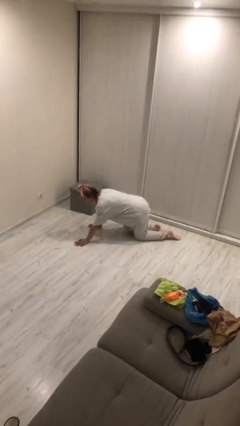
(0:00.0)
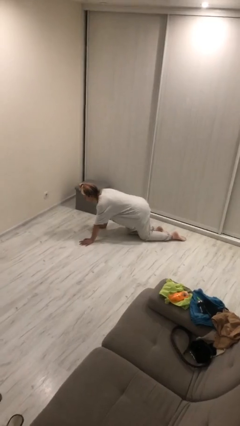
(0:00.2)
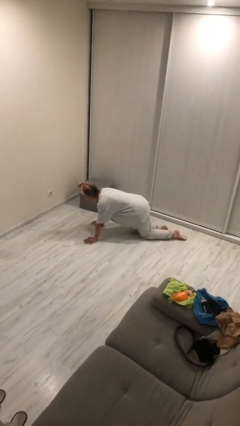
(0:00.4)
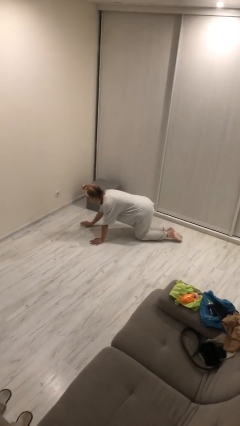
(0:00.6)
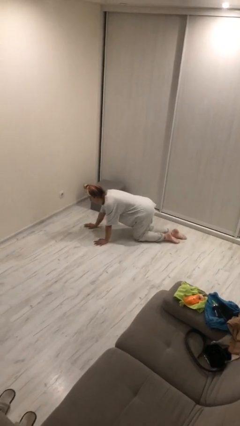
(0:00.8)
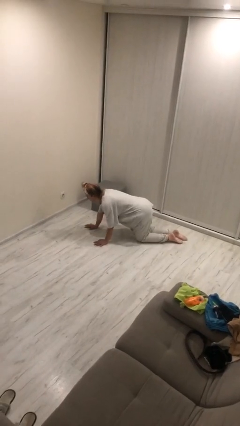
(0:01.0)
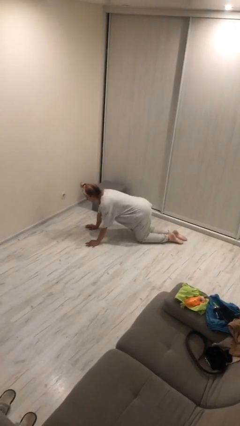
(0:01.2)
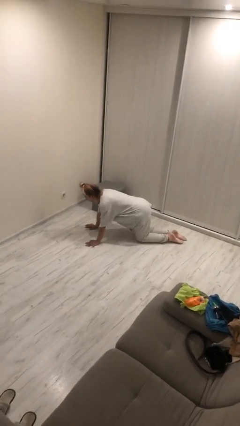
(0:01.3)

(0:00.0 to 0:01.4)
person crawls

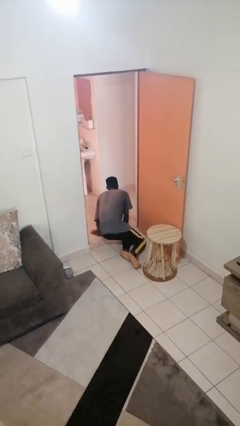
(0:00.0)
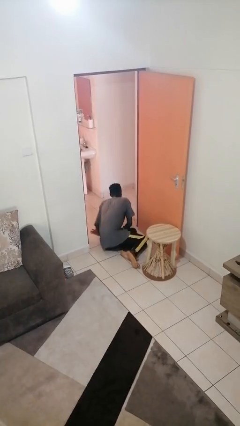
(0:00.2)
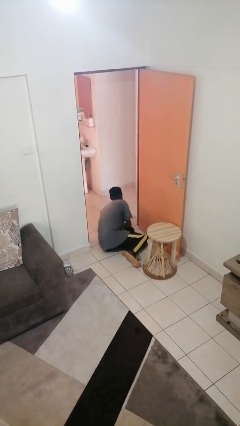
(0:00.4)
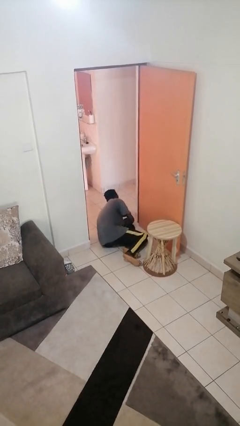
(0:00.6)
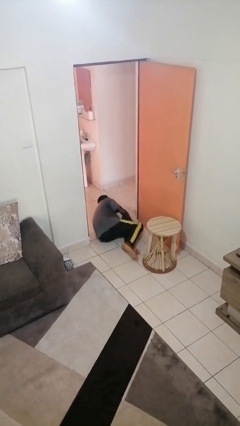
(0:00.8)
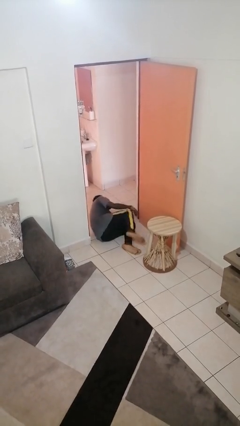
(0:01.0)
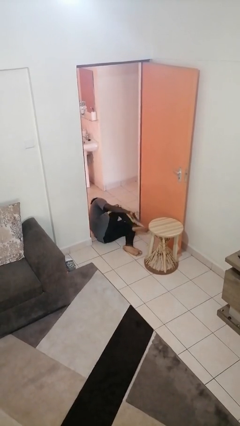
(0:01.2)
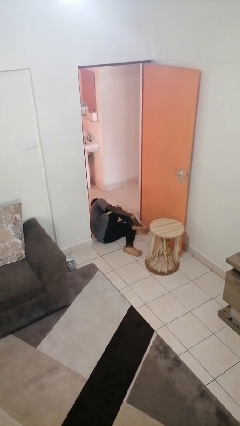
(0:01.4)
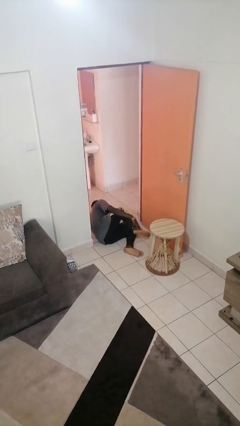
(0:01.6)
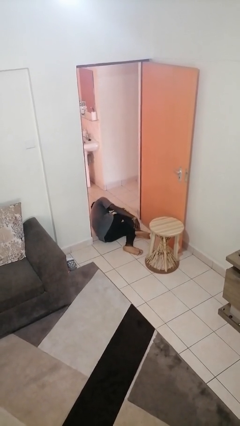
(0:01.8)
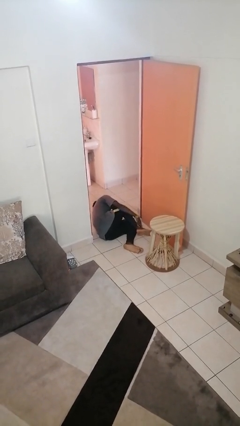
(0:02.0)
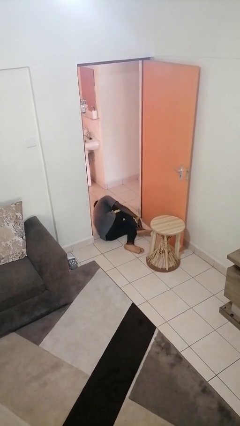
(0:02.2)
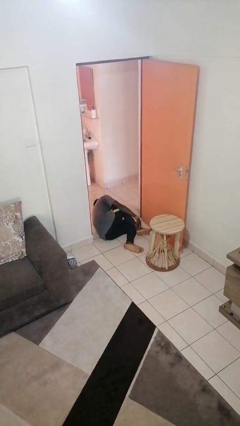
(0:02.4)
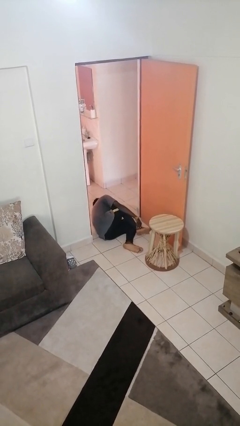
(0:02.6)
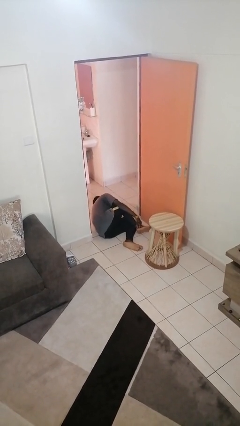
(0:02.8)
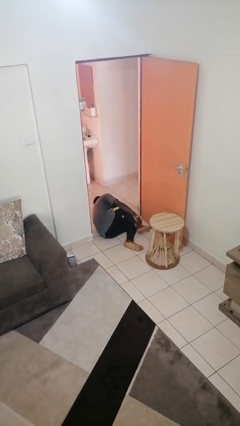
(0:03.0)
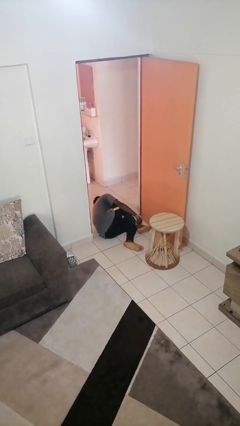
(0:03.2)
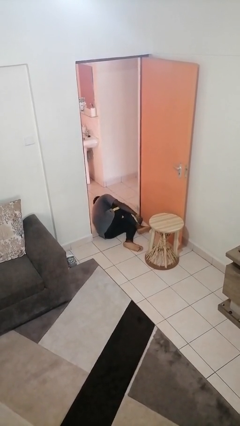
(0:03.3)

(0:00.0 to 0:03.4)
person lies down on floor

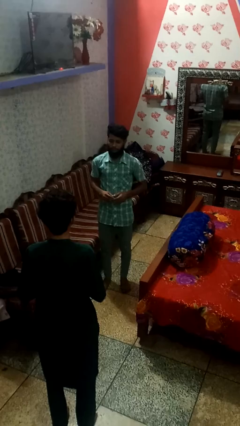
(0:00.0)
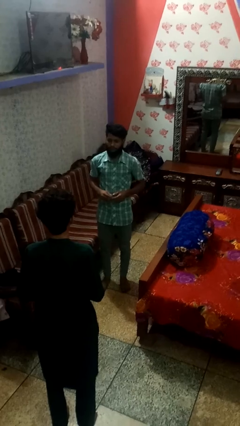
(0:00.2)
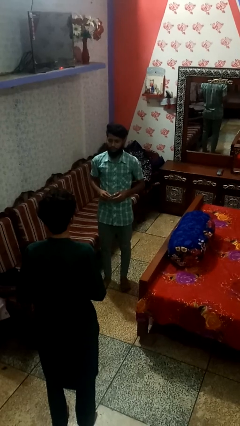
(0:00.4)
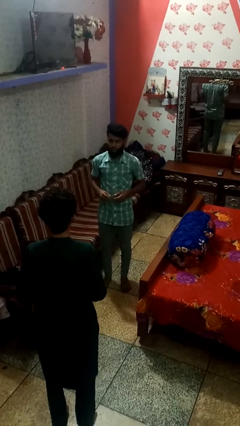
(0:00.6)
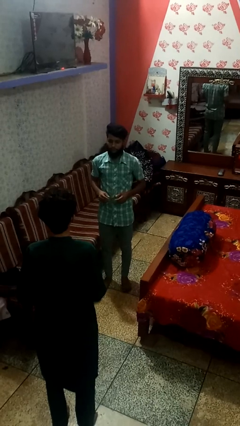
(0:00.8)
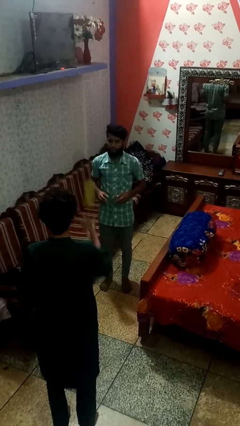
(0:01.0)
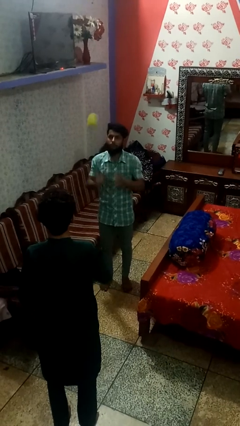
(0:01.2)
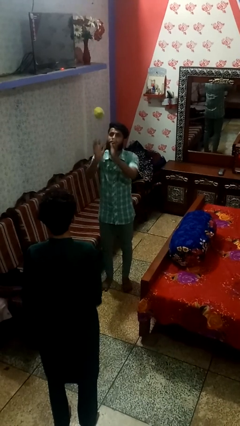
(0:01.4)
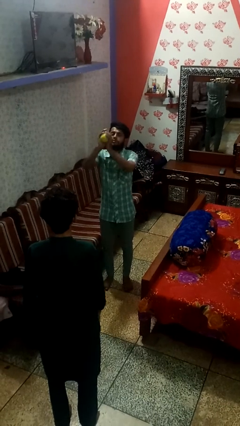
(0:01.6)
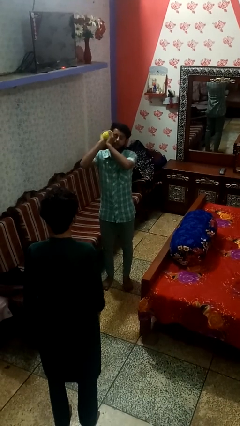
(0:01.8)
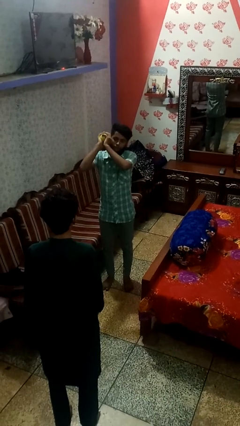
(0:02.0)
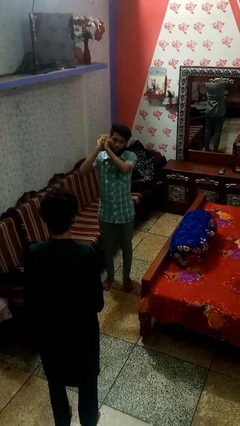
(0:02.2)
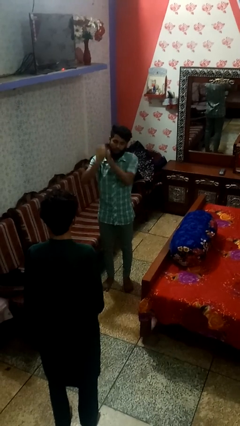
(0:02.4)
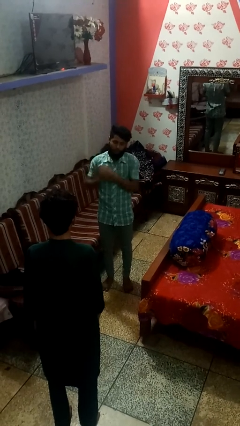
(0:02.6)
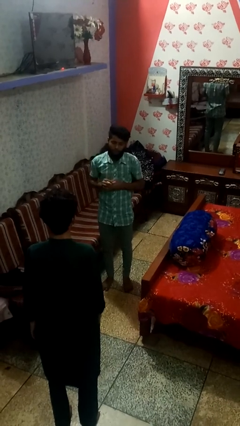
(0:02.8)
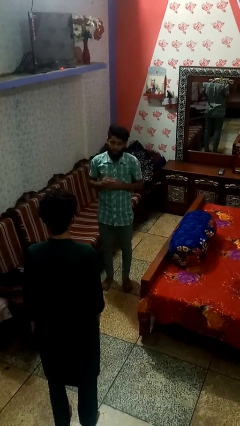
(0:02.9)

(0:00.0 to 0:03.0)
person catches object from person

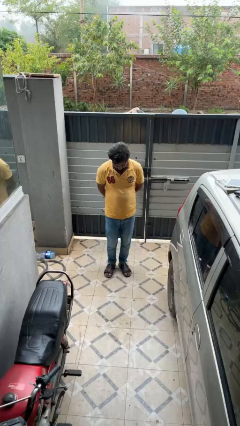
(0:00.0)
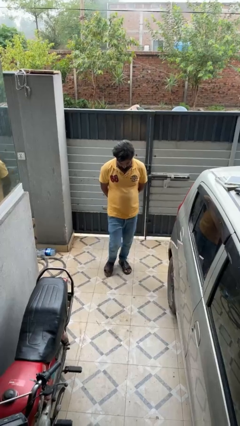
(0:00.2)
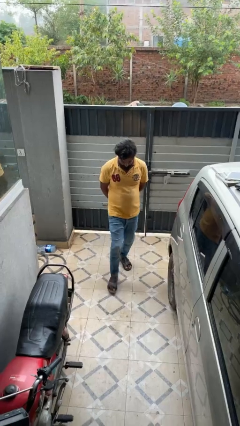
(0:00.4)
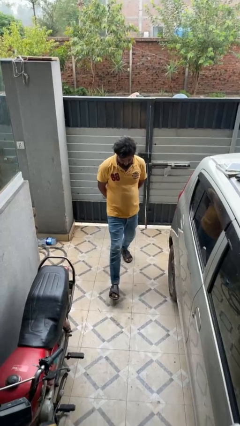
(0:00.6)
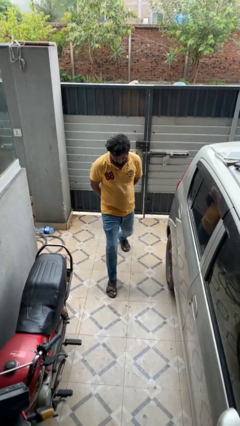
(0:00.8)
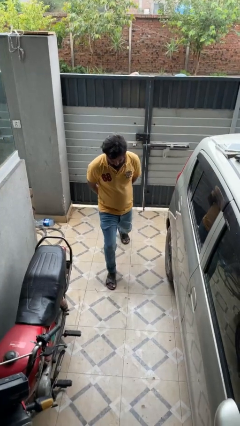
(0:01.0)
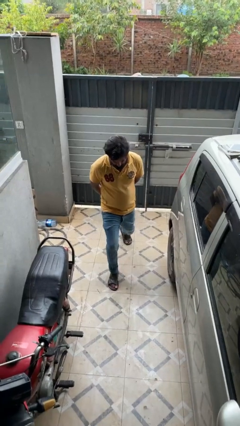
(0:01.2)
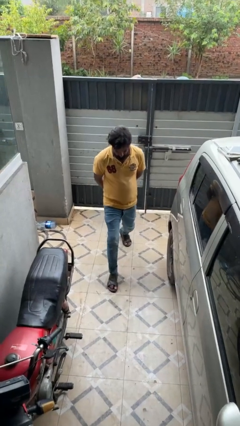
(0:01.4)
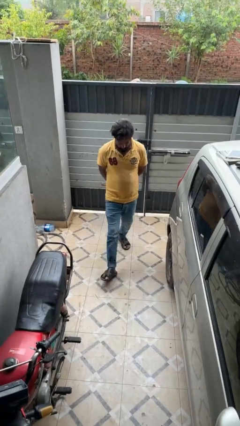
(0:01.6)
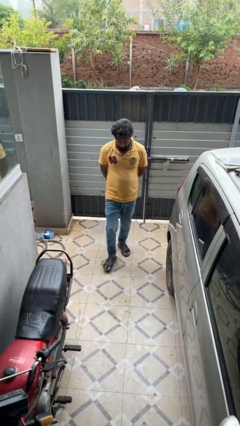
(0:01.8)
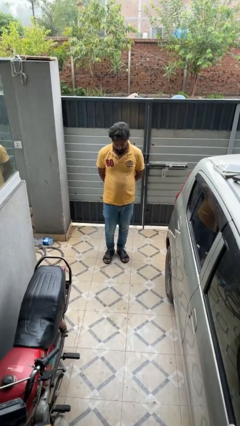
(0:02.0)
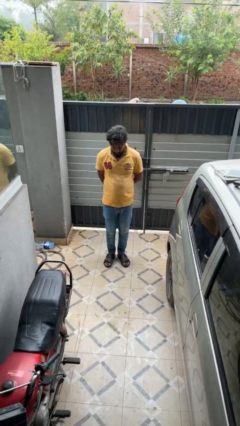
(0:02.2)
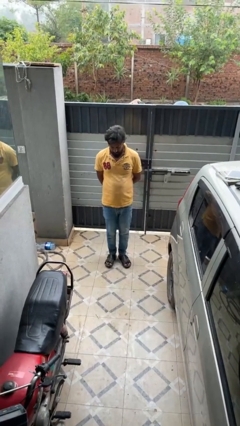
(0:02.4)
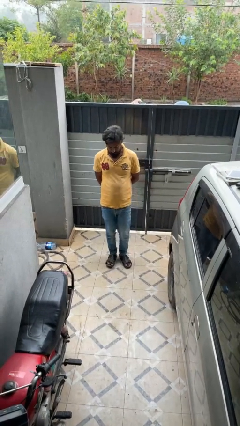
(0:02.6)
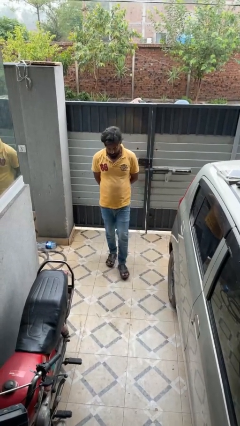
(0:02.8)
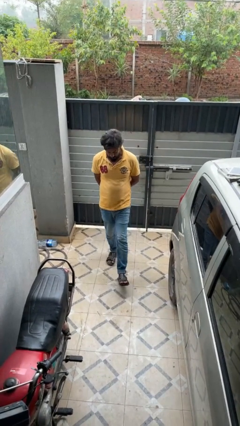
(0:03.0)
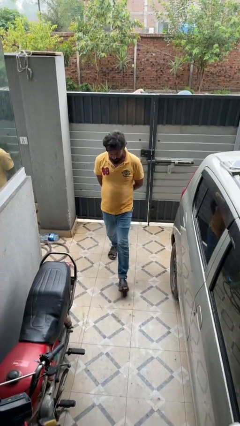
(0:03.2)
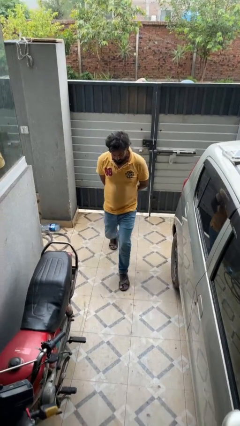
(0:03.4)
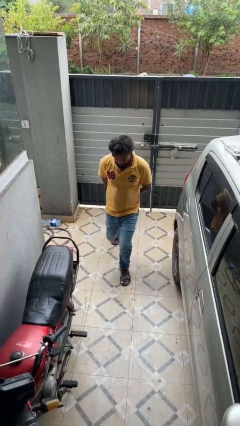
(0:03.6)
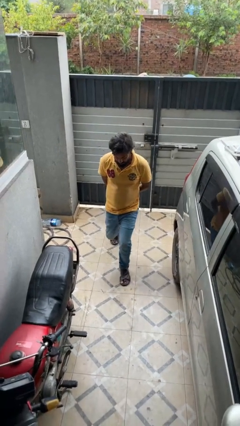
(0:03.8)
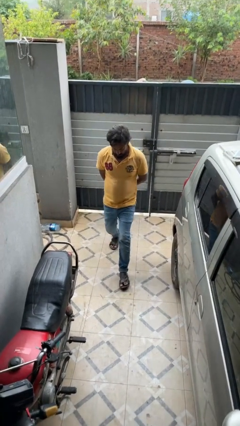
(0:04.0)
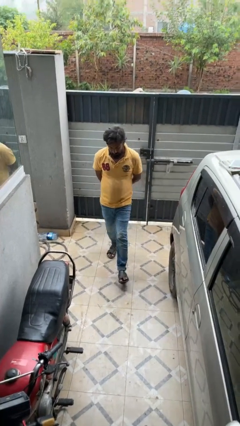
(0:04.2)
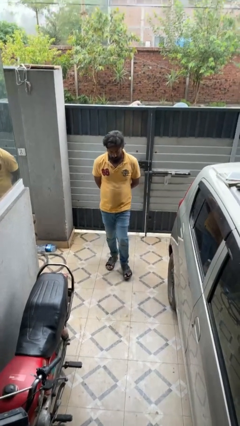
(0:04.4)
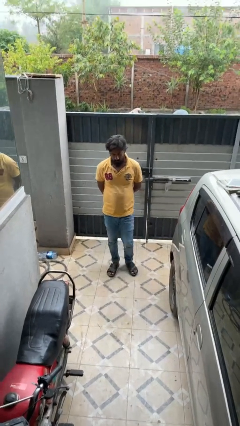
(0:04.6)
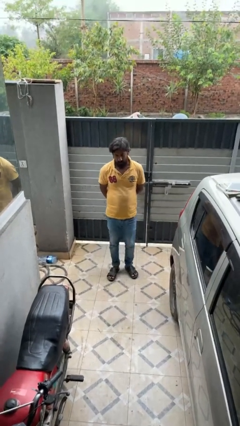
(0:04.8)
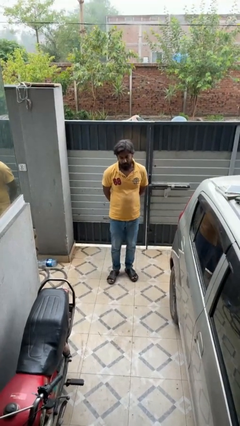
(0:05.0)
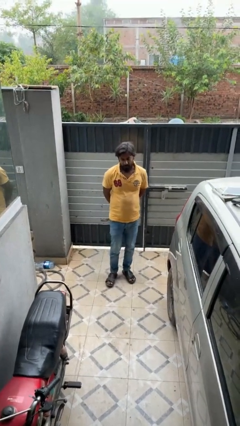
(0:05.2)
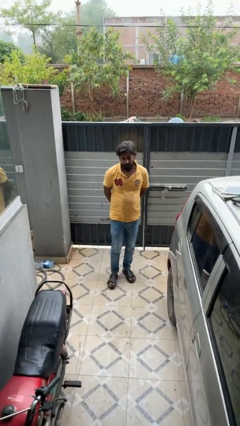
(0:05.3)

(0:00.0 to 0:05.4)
person exercises with lunges

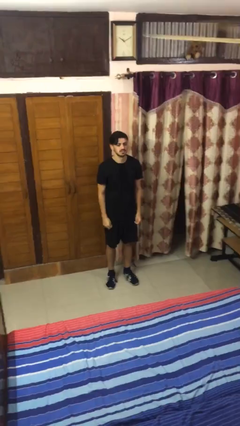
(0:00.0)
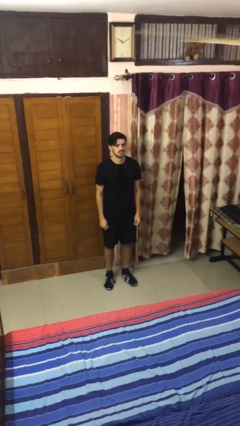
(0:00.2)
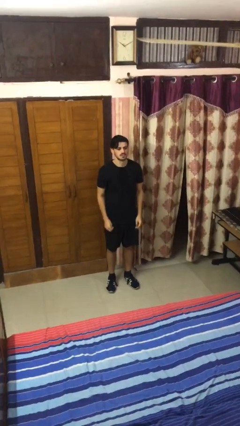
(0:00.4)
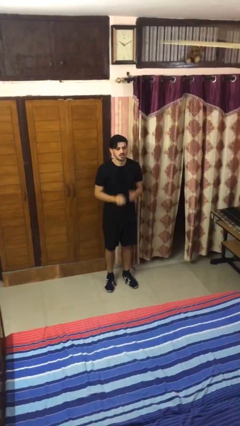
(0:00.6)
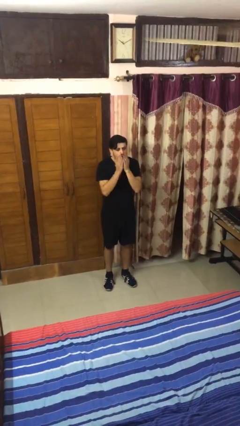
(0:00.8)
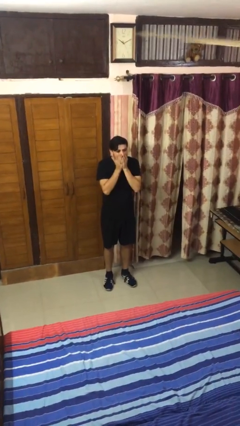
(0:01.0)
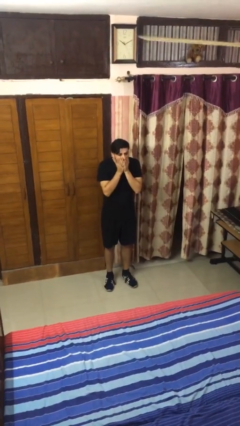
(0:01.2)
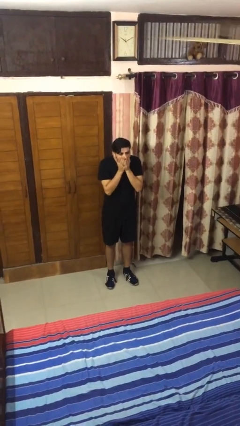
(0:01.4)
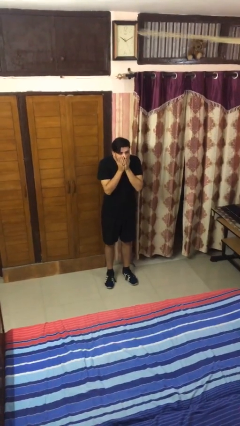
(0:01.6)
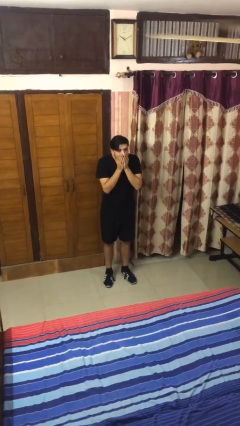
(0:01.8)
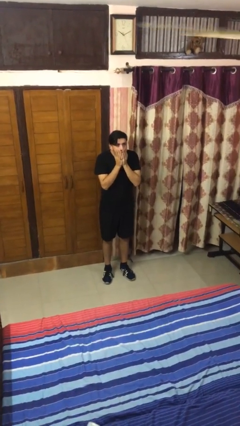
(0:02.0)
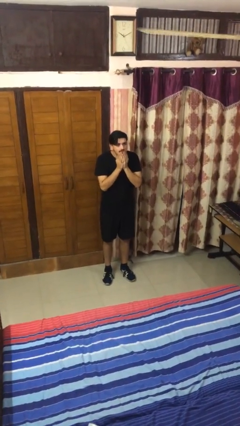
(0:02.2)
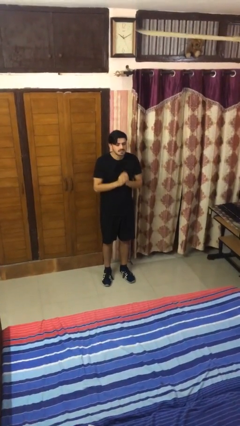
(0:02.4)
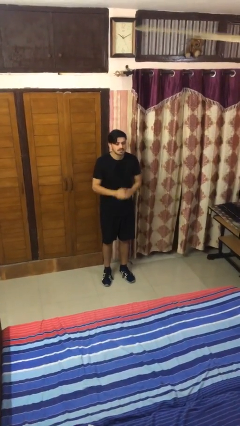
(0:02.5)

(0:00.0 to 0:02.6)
person covers face with hands

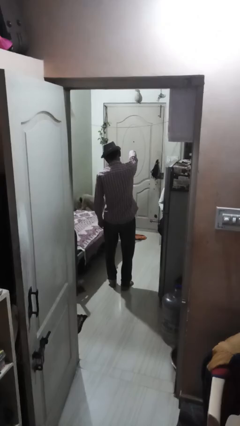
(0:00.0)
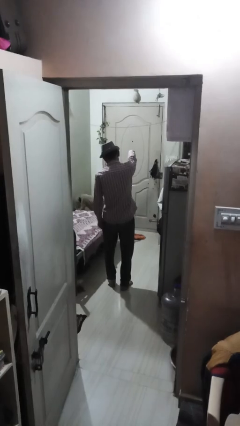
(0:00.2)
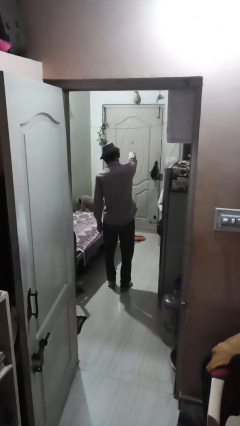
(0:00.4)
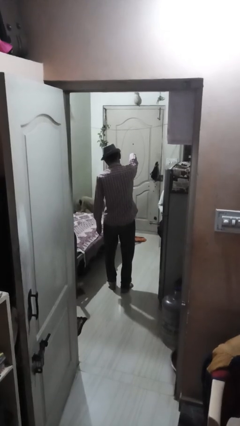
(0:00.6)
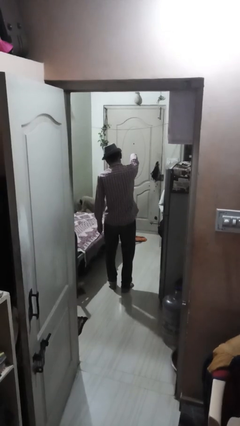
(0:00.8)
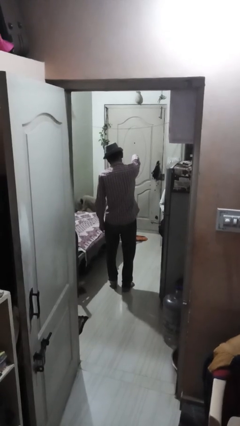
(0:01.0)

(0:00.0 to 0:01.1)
person points at person

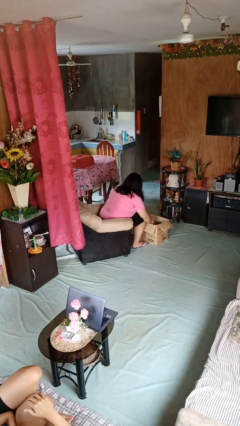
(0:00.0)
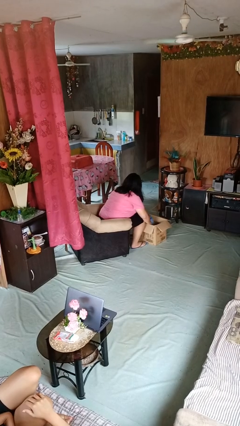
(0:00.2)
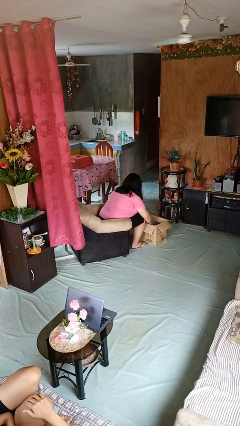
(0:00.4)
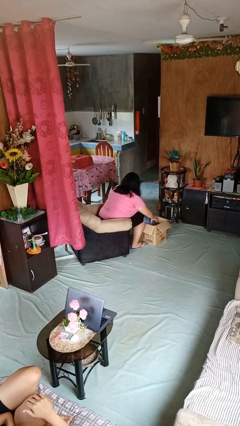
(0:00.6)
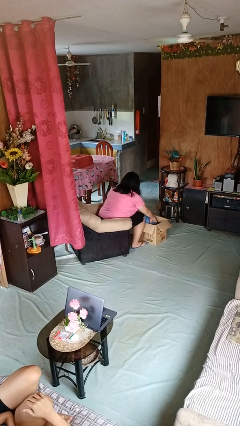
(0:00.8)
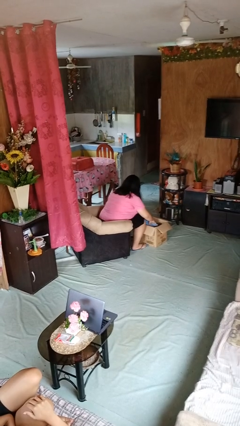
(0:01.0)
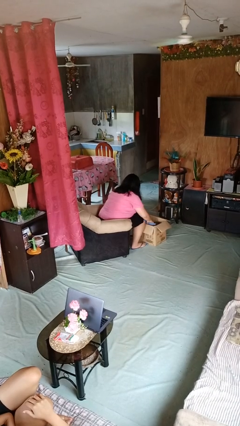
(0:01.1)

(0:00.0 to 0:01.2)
person searches in box
